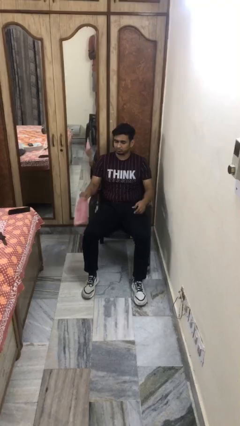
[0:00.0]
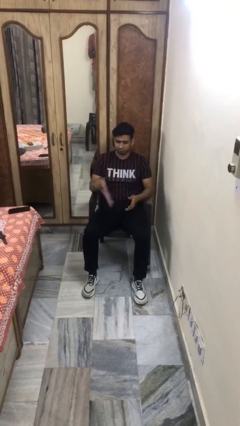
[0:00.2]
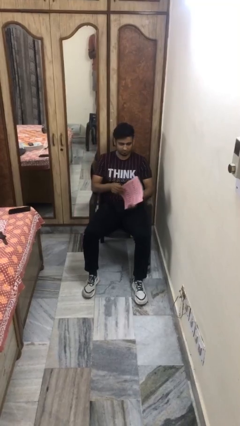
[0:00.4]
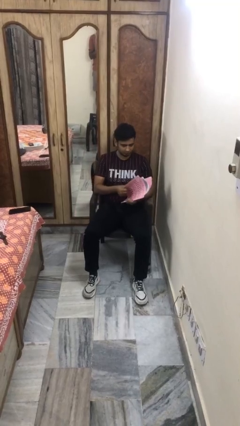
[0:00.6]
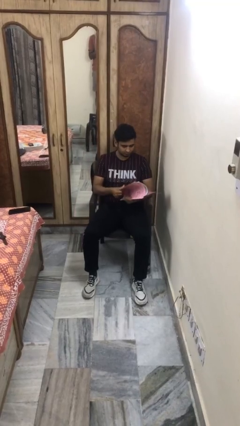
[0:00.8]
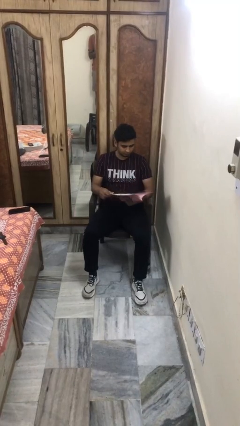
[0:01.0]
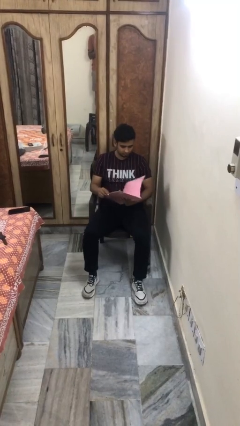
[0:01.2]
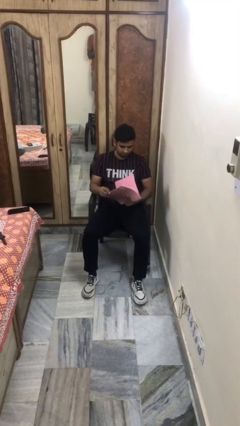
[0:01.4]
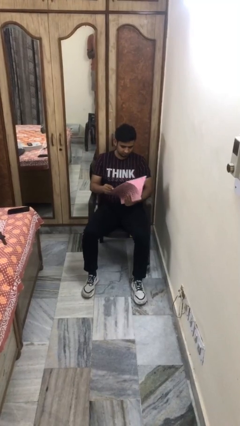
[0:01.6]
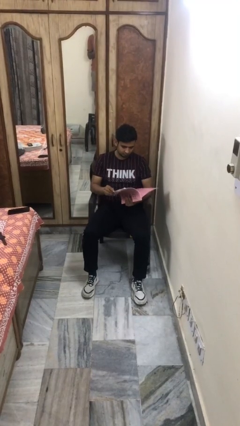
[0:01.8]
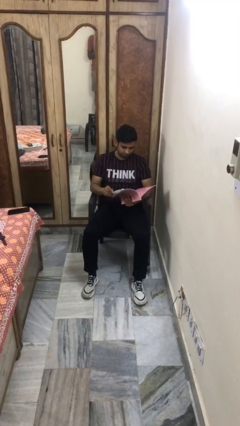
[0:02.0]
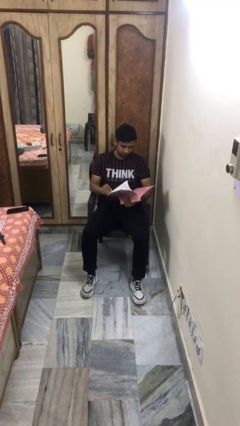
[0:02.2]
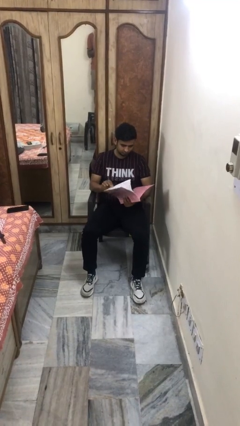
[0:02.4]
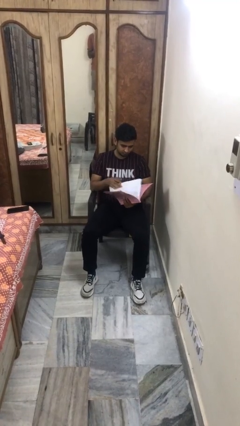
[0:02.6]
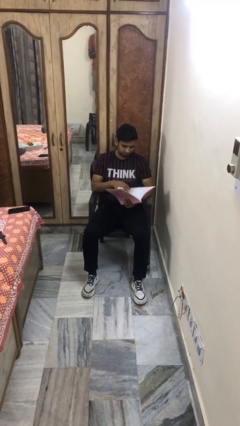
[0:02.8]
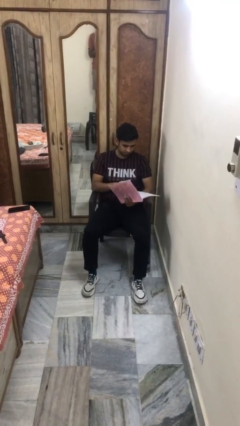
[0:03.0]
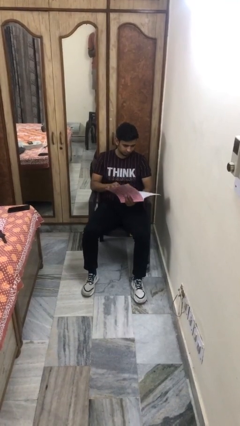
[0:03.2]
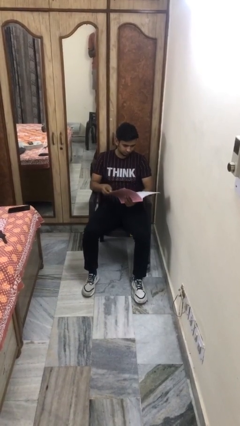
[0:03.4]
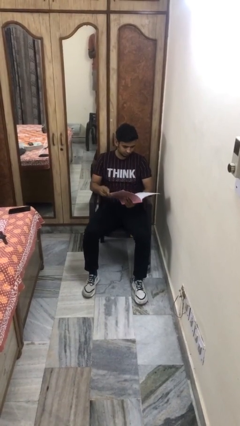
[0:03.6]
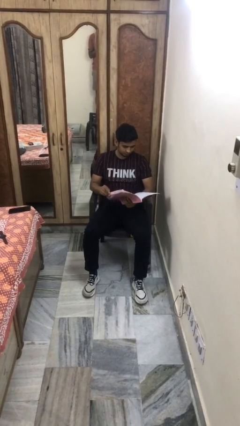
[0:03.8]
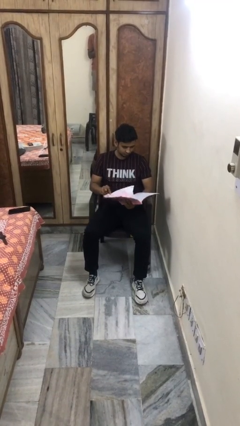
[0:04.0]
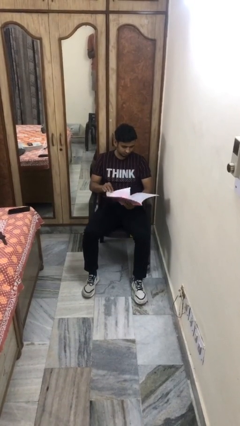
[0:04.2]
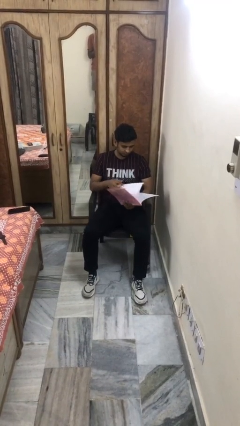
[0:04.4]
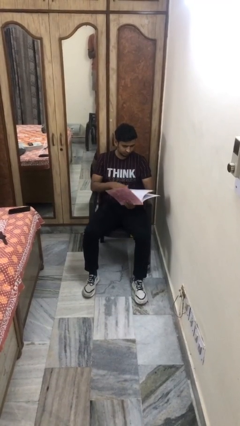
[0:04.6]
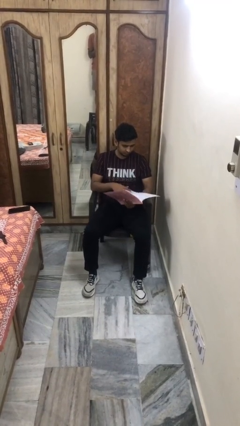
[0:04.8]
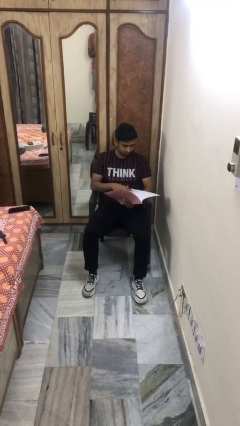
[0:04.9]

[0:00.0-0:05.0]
person reads magazine

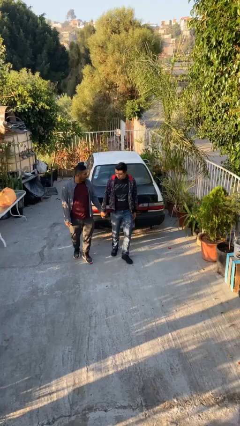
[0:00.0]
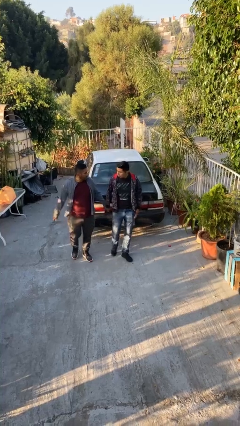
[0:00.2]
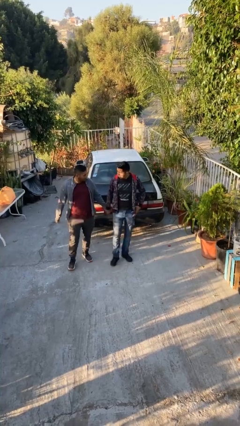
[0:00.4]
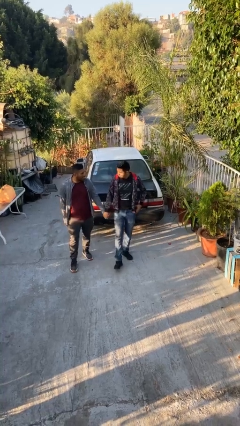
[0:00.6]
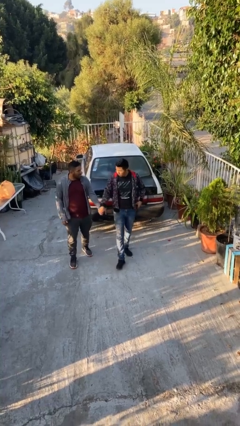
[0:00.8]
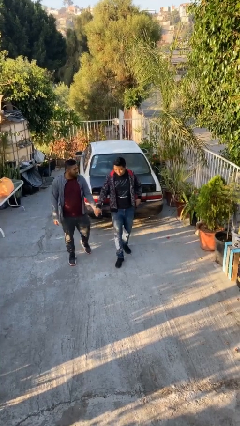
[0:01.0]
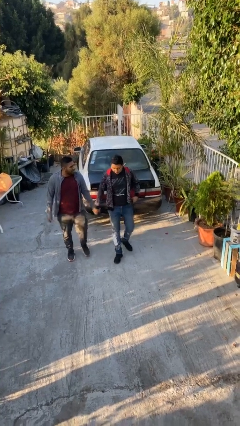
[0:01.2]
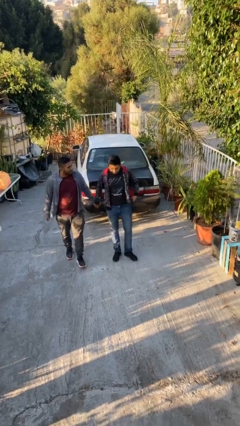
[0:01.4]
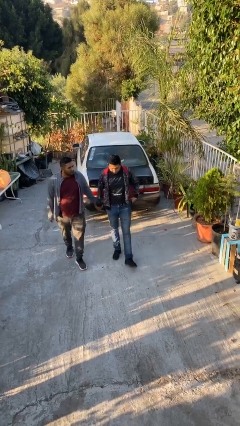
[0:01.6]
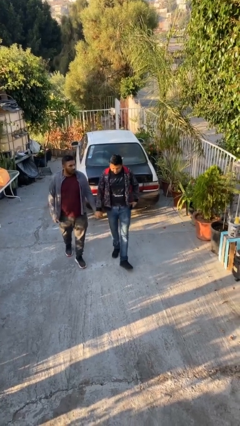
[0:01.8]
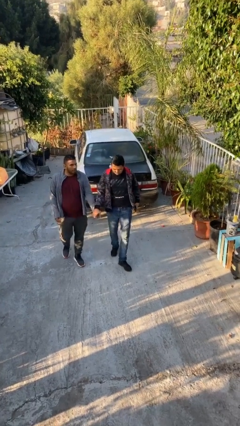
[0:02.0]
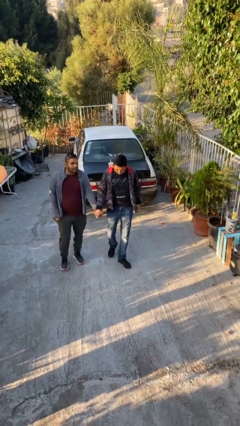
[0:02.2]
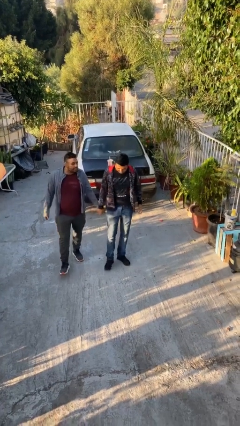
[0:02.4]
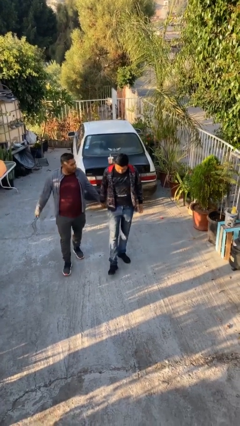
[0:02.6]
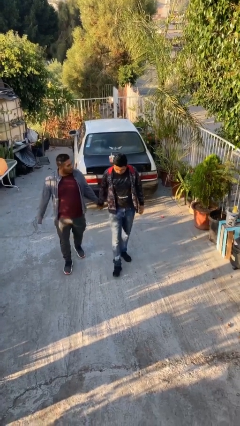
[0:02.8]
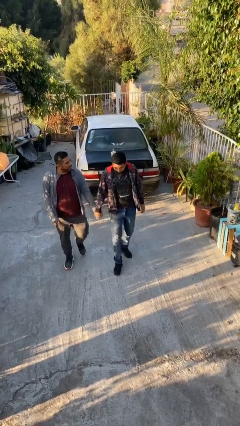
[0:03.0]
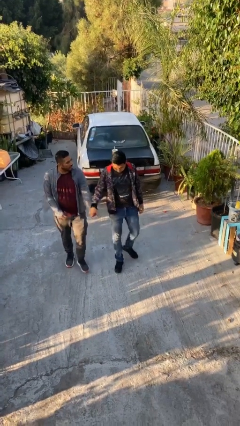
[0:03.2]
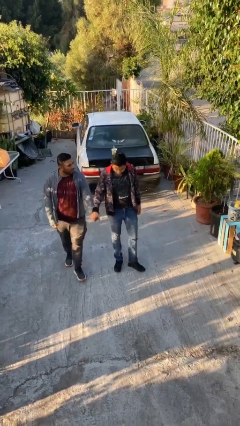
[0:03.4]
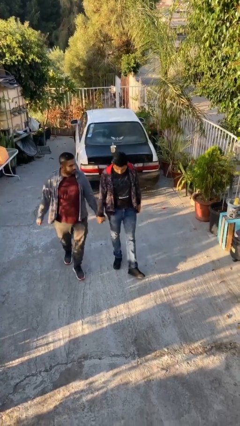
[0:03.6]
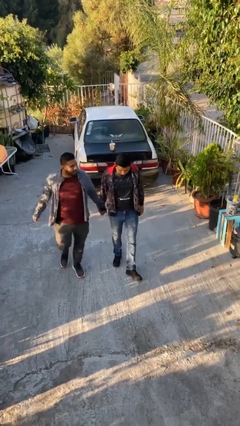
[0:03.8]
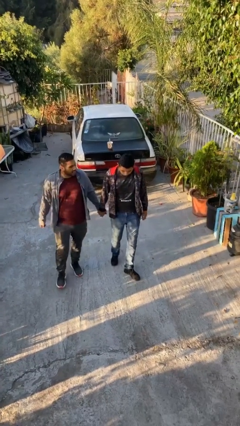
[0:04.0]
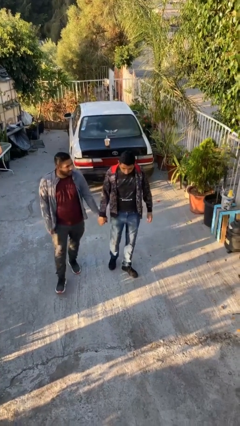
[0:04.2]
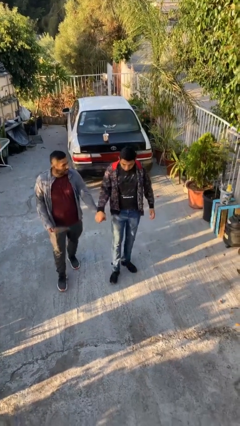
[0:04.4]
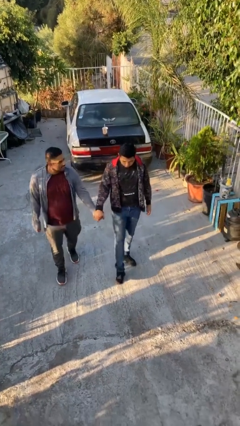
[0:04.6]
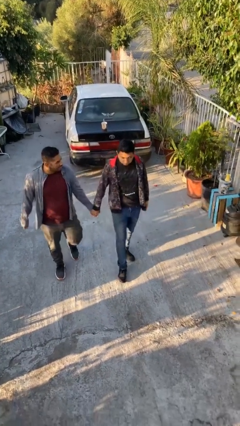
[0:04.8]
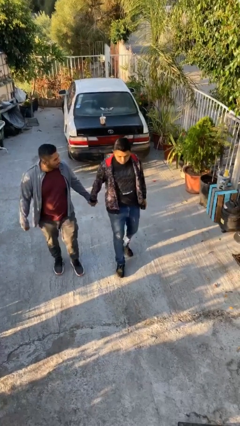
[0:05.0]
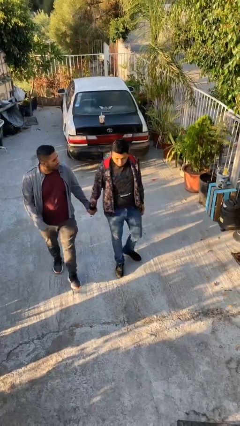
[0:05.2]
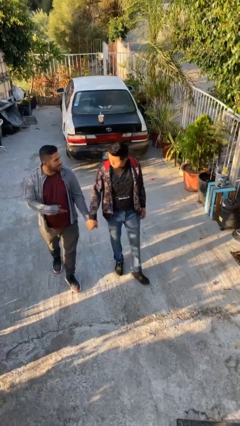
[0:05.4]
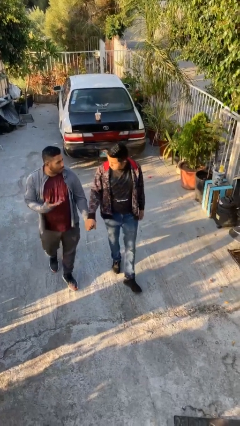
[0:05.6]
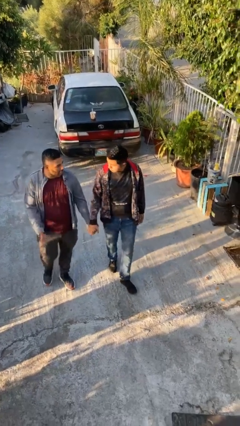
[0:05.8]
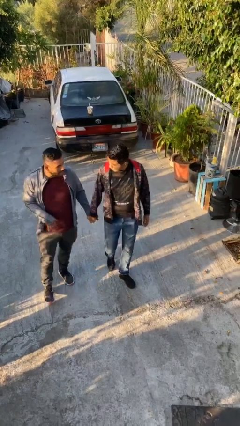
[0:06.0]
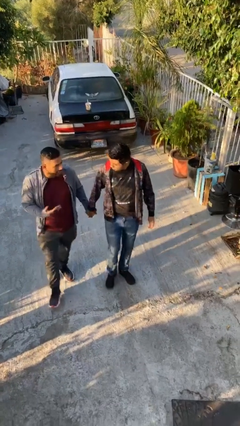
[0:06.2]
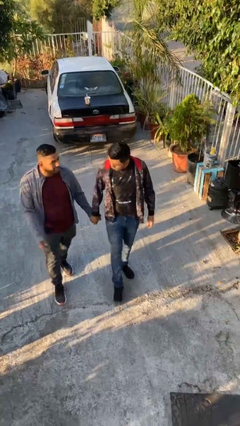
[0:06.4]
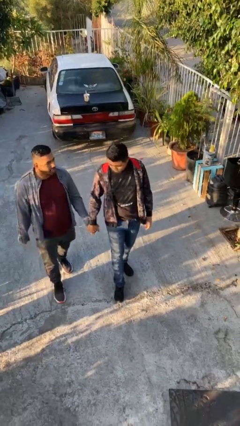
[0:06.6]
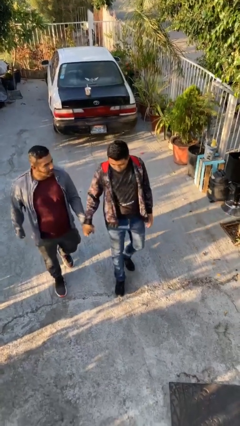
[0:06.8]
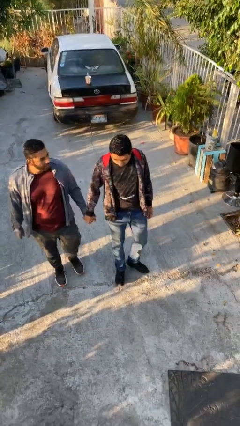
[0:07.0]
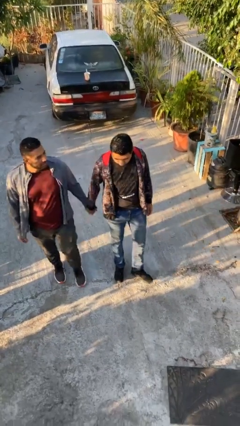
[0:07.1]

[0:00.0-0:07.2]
person holds hand

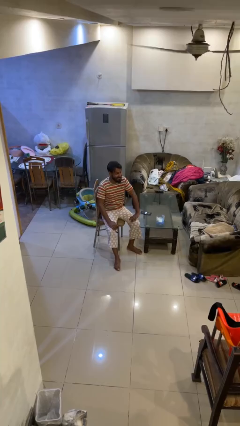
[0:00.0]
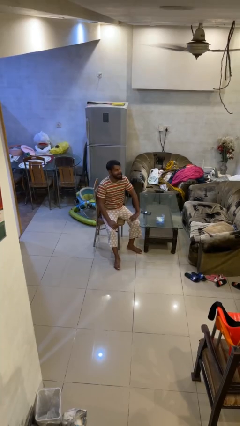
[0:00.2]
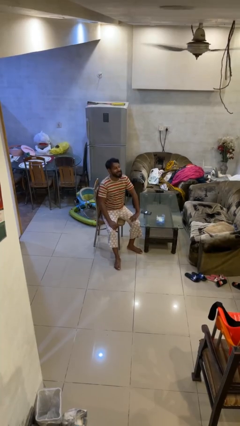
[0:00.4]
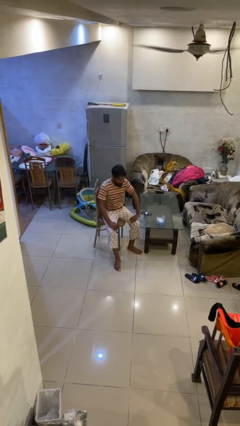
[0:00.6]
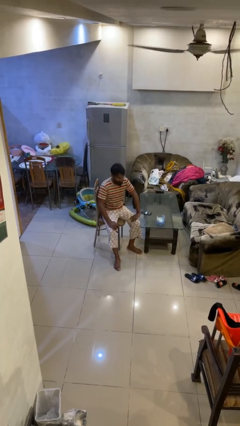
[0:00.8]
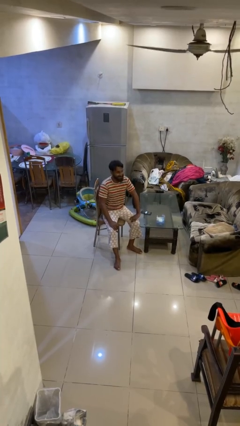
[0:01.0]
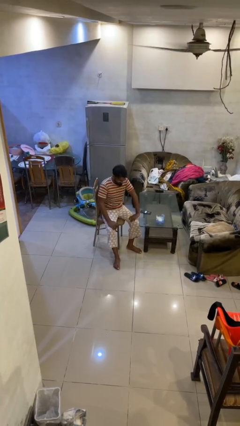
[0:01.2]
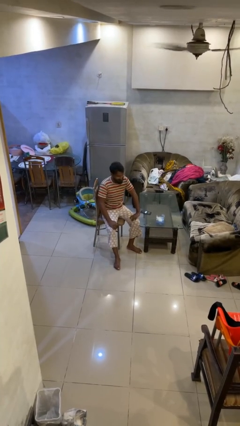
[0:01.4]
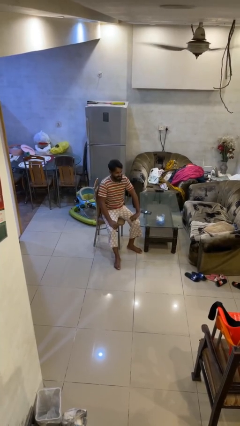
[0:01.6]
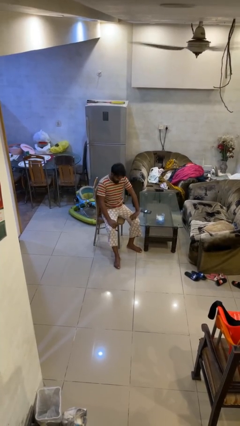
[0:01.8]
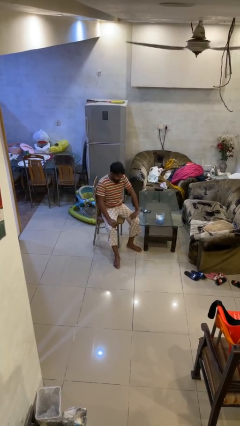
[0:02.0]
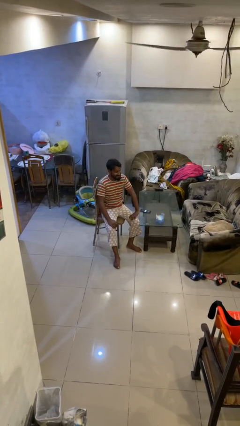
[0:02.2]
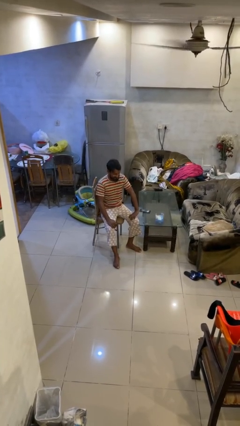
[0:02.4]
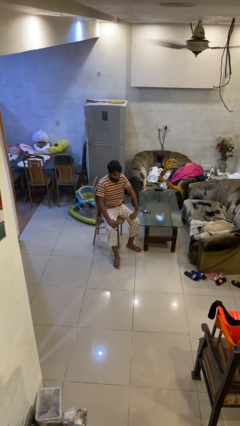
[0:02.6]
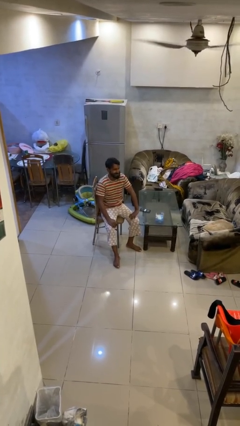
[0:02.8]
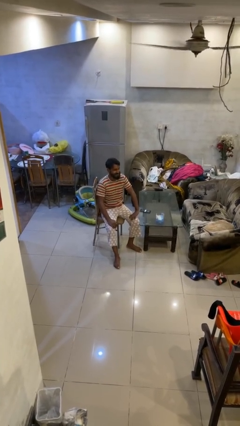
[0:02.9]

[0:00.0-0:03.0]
person nods head

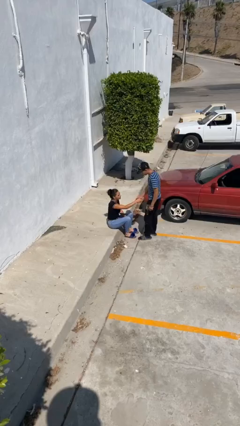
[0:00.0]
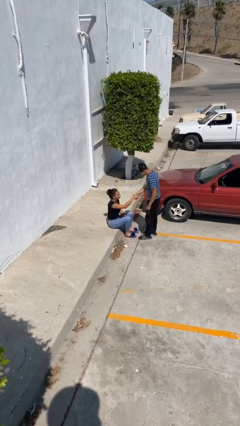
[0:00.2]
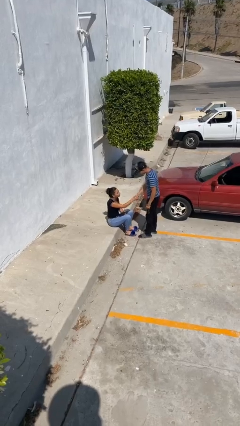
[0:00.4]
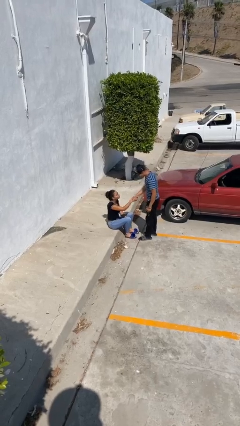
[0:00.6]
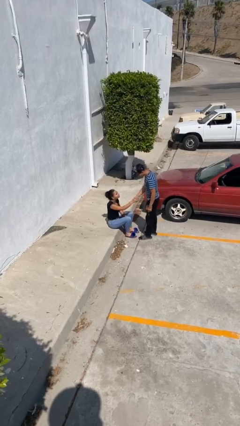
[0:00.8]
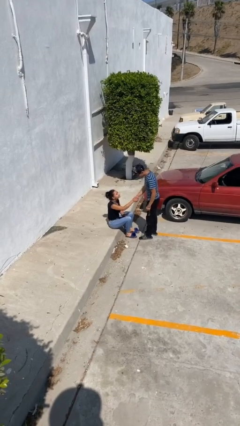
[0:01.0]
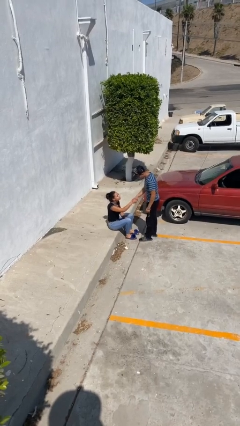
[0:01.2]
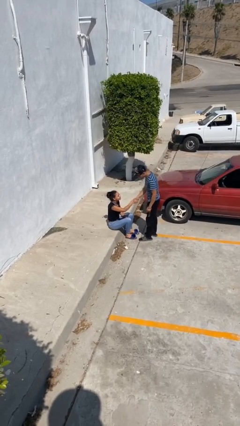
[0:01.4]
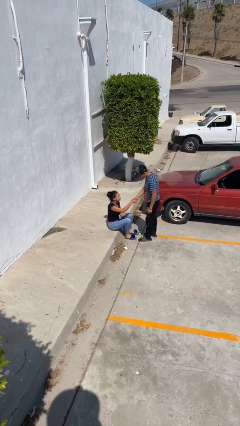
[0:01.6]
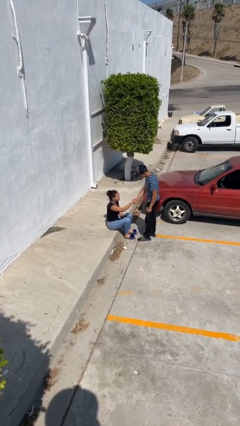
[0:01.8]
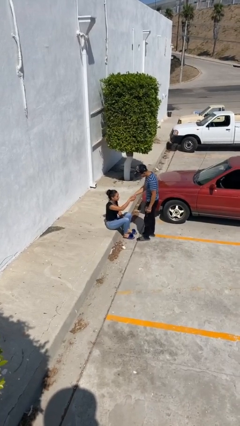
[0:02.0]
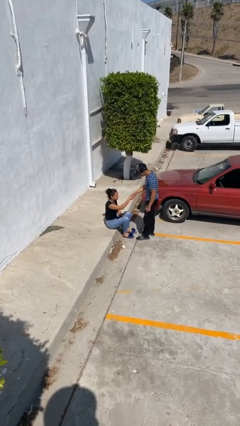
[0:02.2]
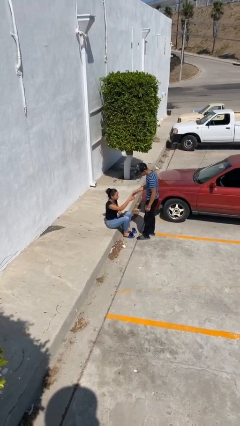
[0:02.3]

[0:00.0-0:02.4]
person shakes hand
